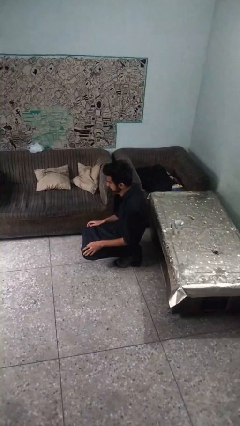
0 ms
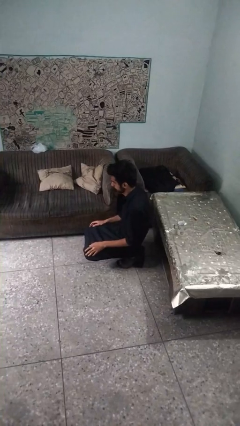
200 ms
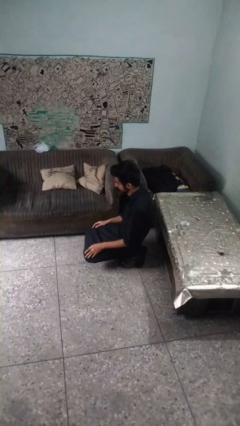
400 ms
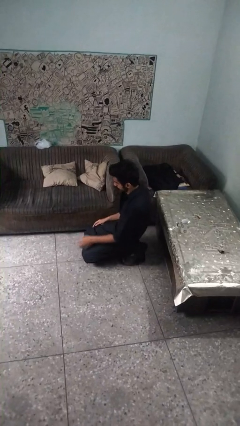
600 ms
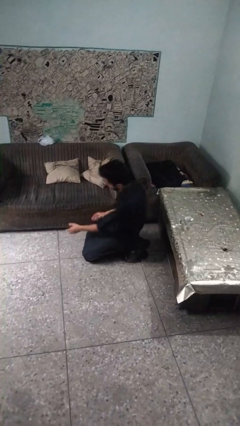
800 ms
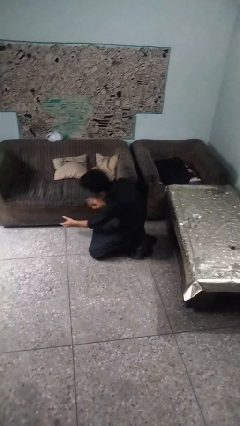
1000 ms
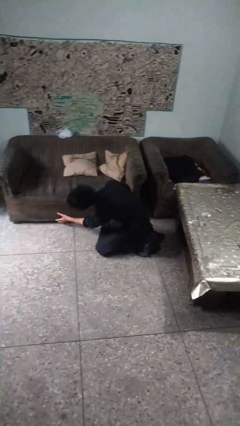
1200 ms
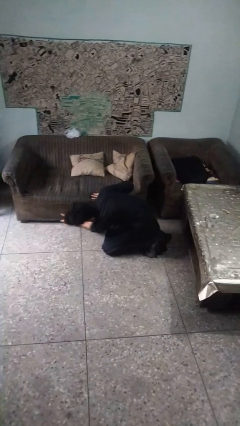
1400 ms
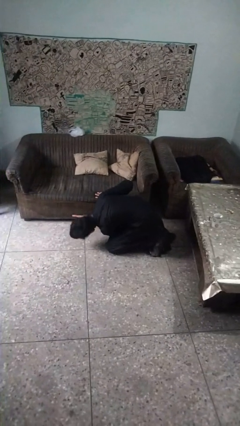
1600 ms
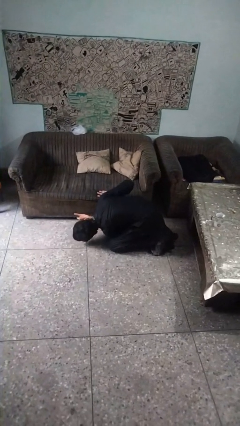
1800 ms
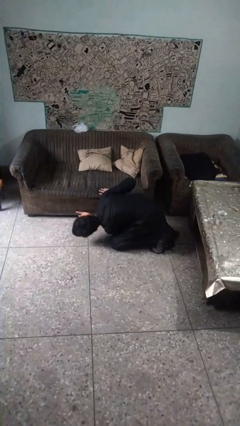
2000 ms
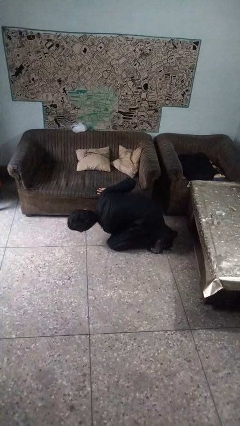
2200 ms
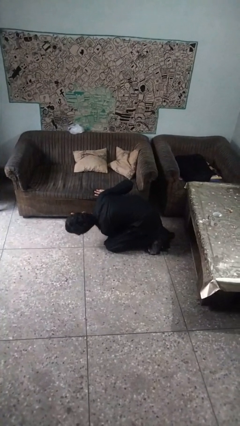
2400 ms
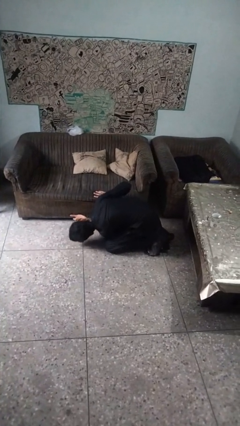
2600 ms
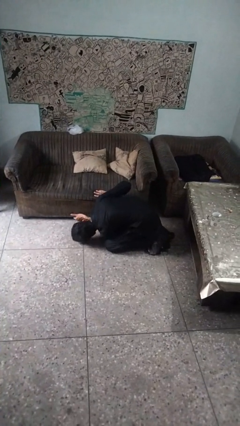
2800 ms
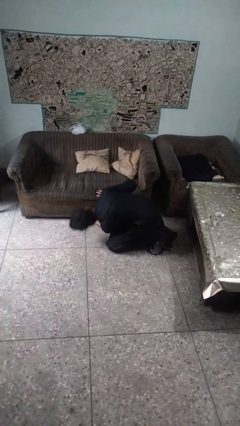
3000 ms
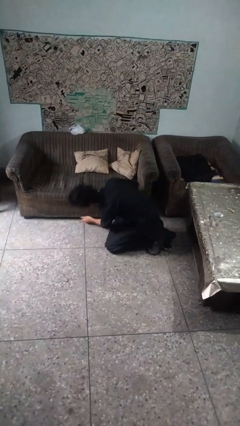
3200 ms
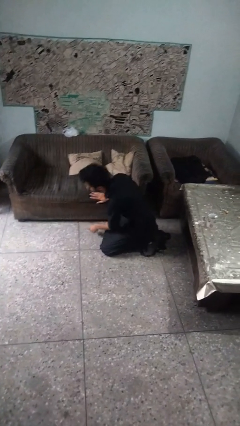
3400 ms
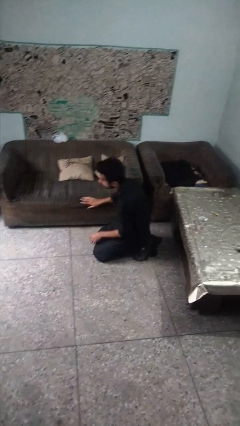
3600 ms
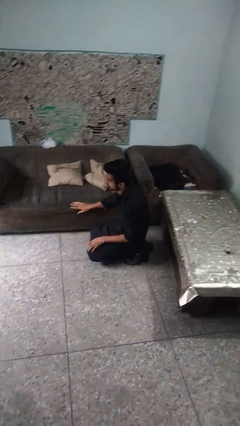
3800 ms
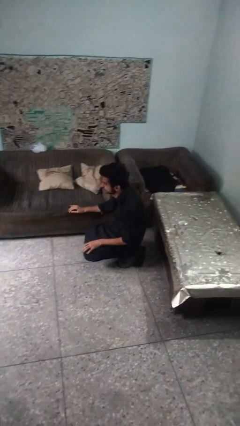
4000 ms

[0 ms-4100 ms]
person searches under couch

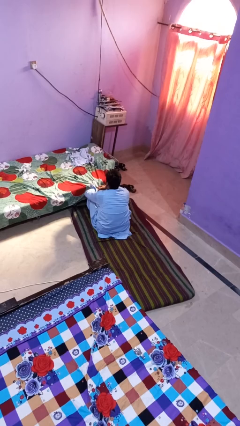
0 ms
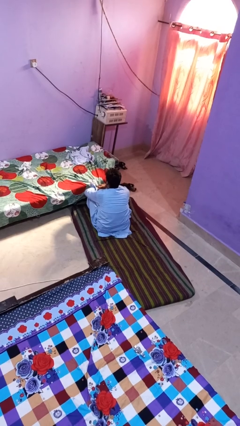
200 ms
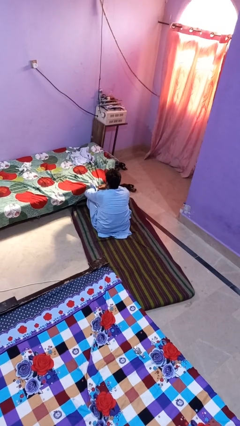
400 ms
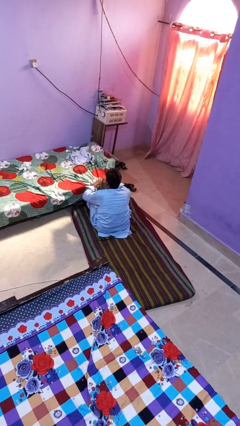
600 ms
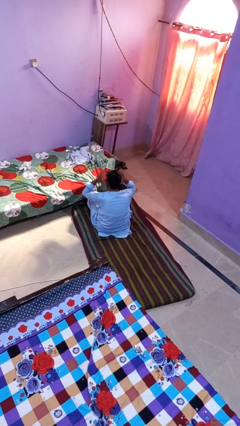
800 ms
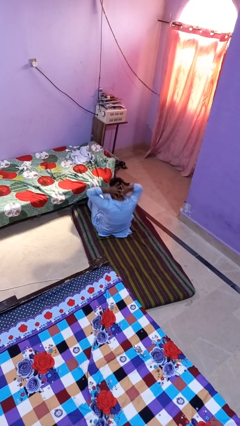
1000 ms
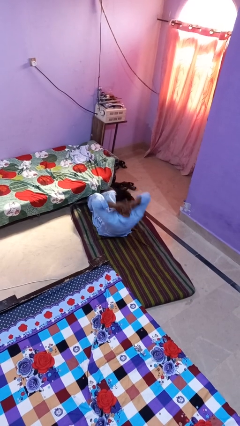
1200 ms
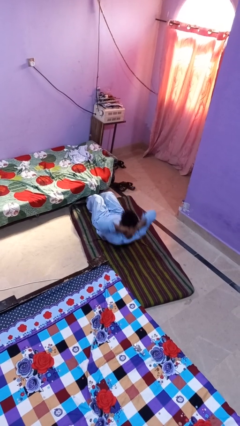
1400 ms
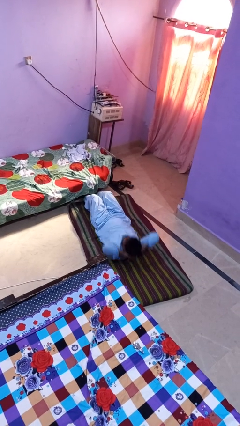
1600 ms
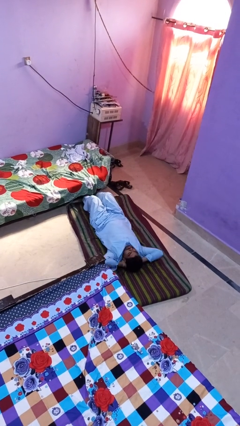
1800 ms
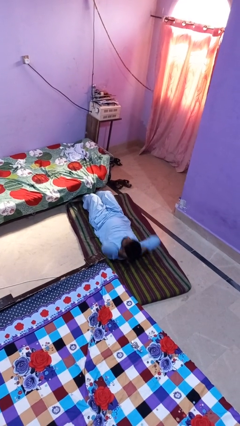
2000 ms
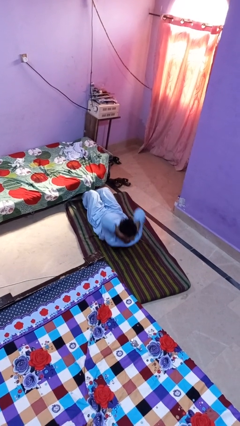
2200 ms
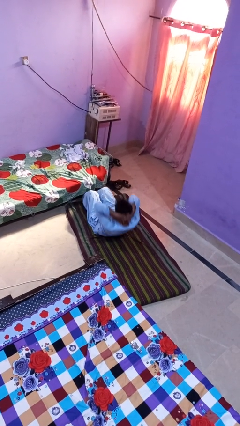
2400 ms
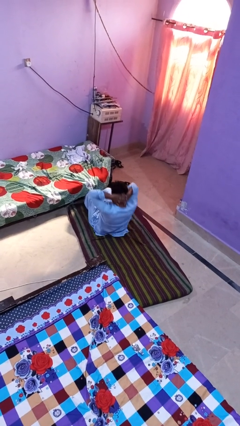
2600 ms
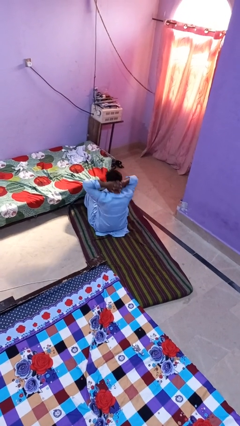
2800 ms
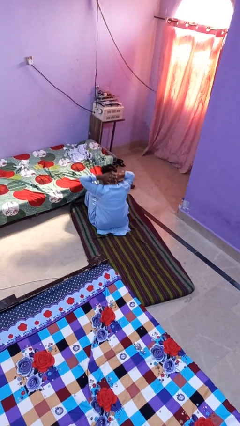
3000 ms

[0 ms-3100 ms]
person exercises with situp

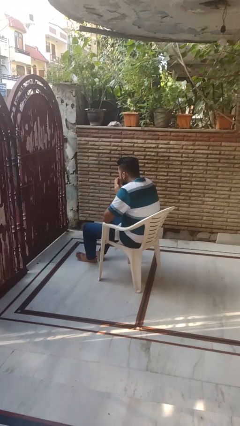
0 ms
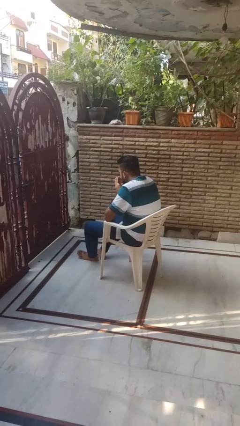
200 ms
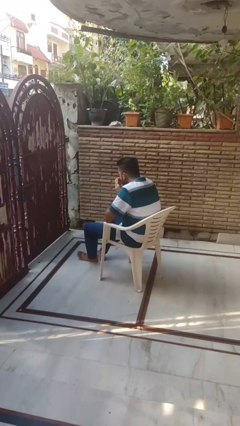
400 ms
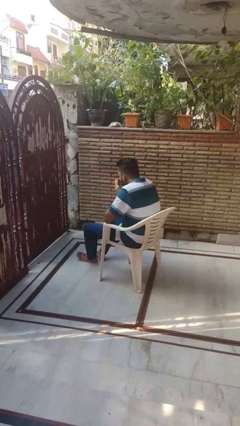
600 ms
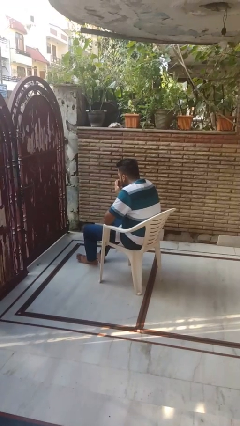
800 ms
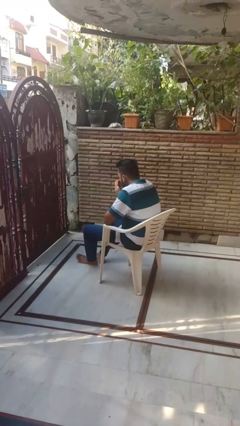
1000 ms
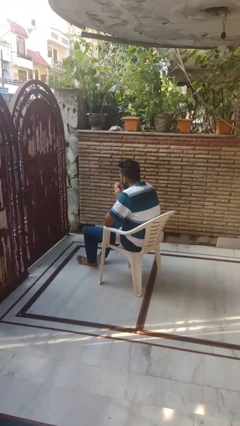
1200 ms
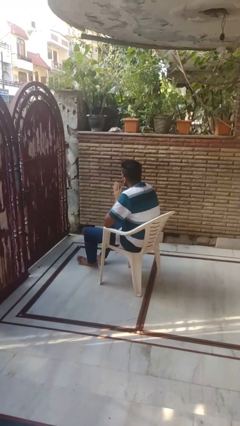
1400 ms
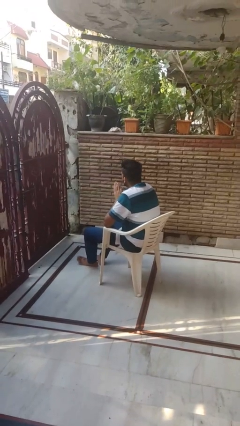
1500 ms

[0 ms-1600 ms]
person blows into hands

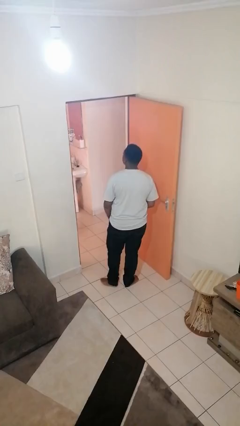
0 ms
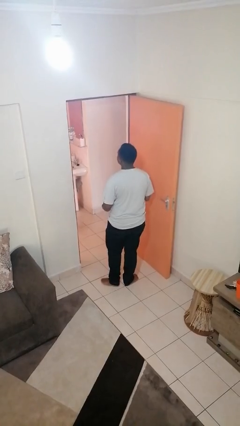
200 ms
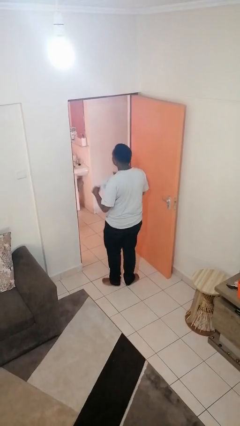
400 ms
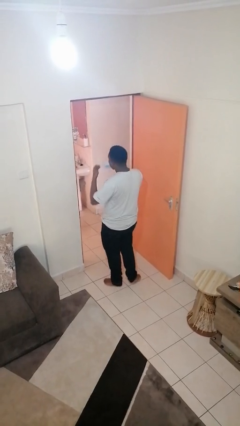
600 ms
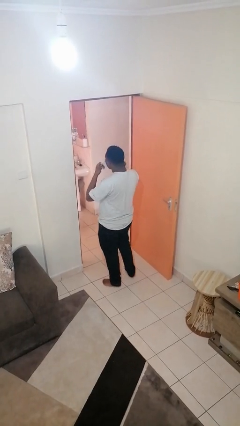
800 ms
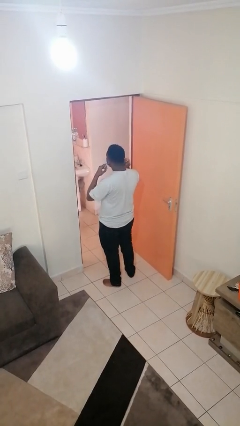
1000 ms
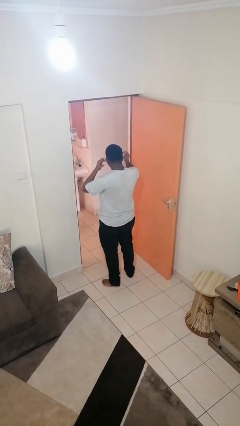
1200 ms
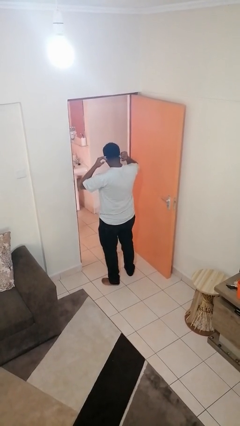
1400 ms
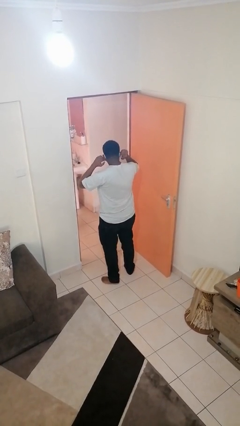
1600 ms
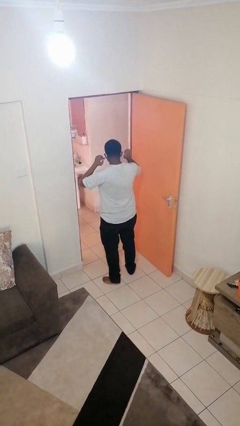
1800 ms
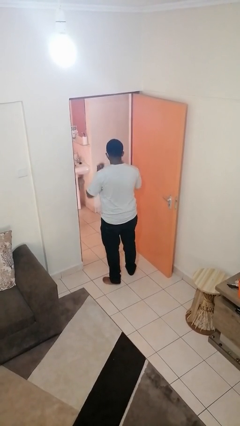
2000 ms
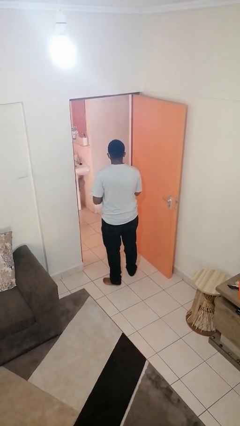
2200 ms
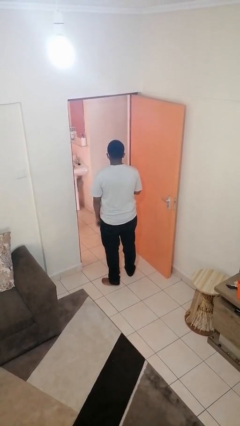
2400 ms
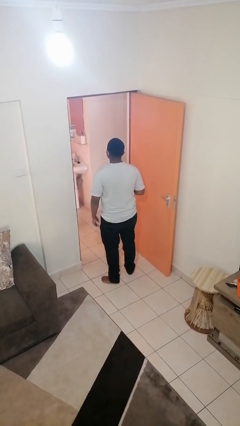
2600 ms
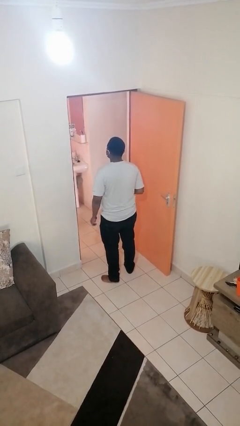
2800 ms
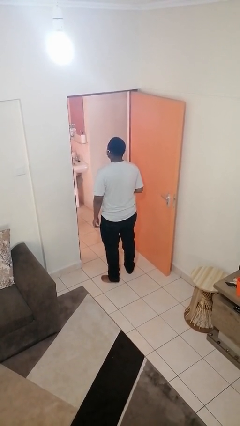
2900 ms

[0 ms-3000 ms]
person puts on facemask

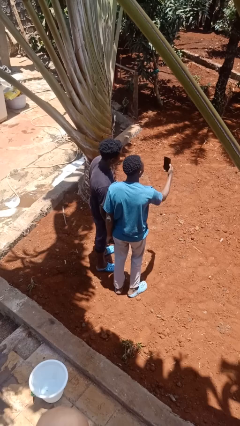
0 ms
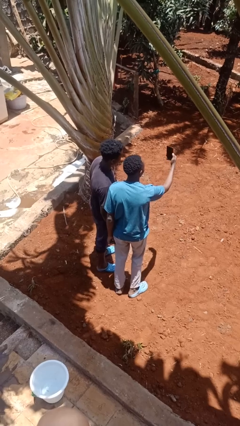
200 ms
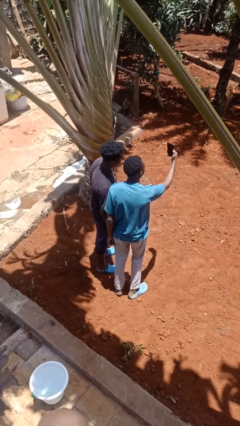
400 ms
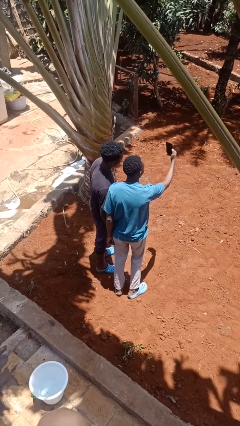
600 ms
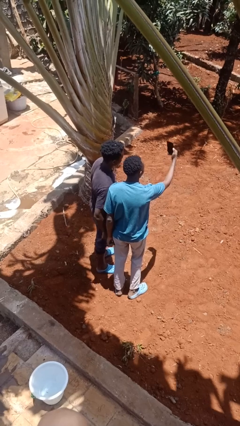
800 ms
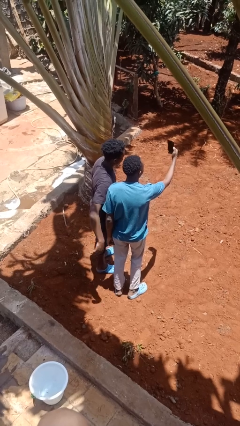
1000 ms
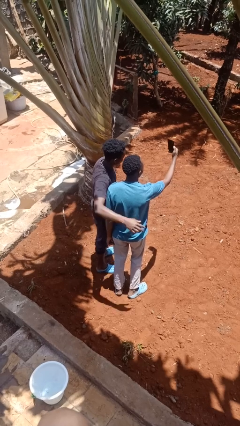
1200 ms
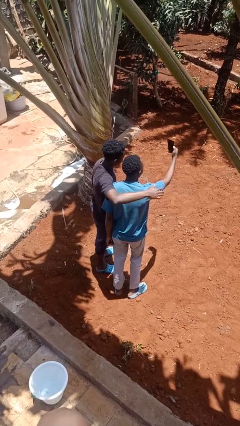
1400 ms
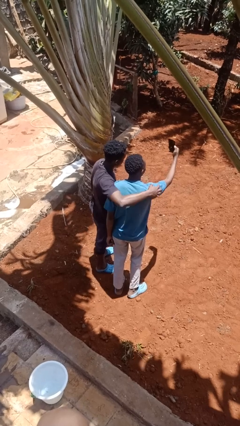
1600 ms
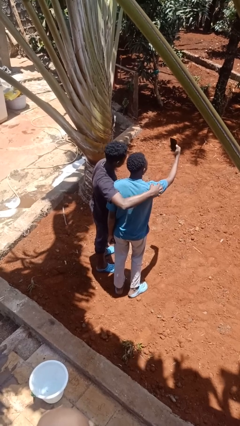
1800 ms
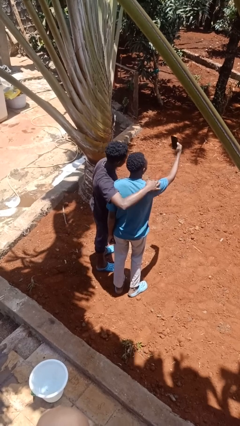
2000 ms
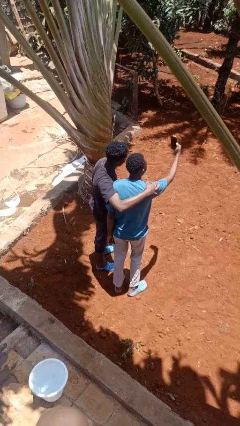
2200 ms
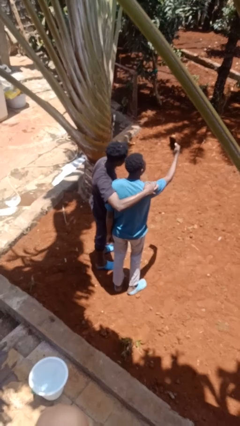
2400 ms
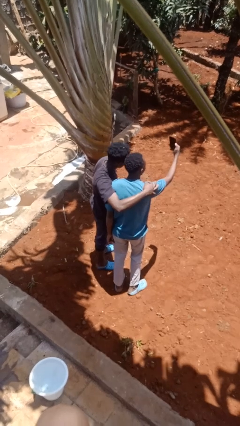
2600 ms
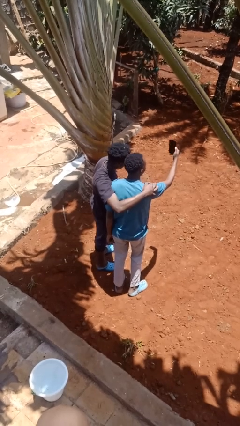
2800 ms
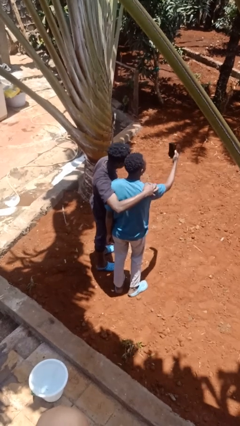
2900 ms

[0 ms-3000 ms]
person takes selfie with person

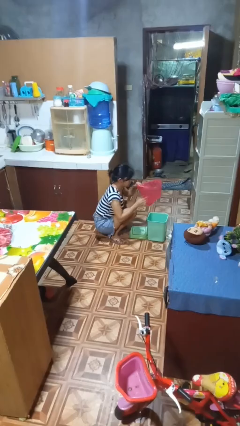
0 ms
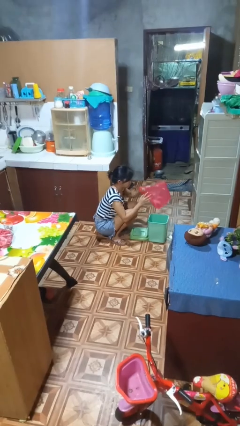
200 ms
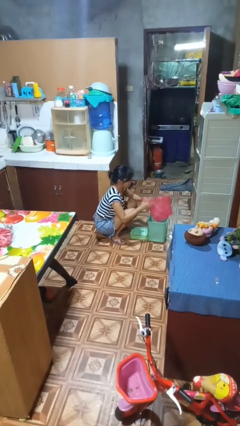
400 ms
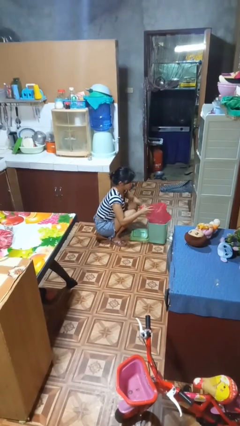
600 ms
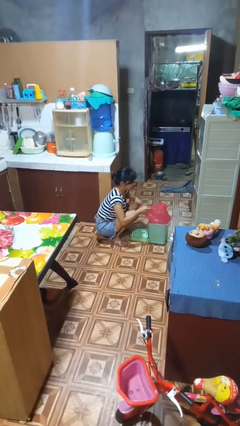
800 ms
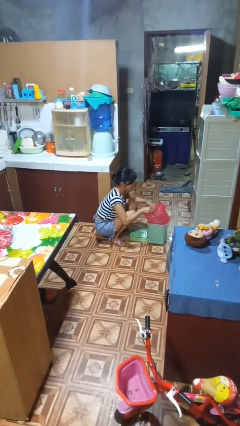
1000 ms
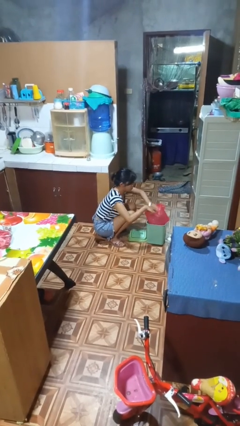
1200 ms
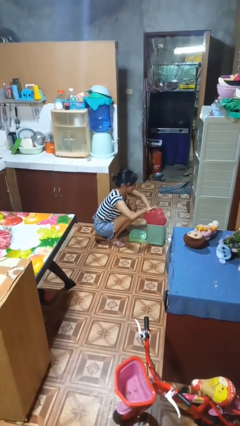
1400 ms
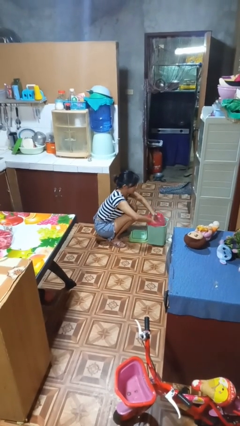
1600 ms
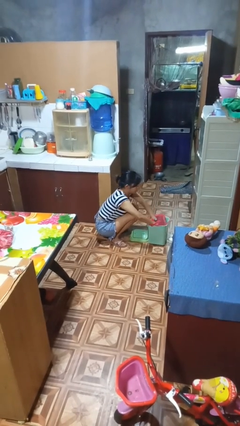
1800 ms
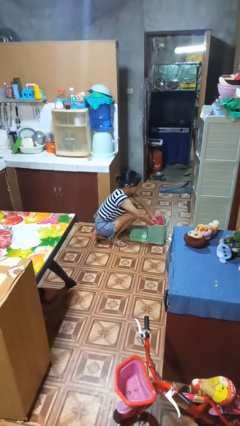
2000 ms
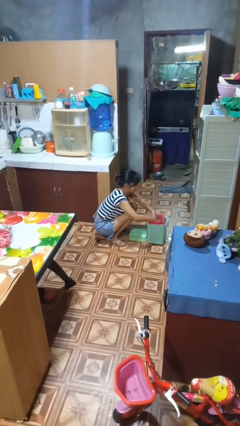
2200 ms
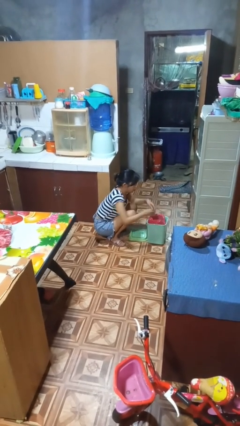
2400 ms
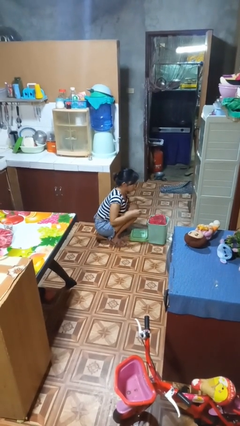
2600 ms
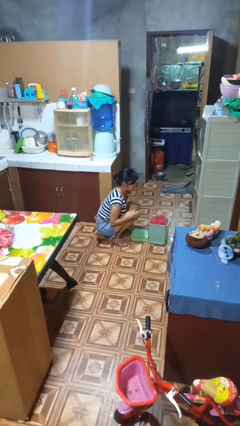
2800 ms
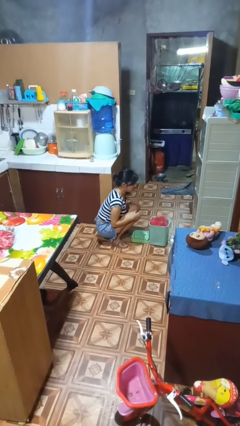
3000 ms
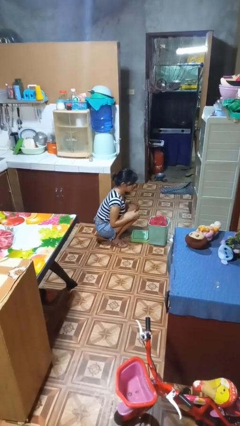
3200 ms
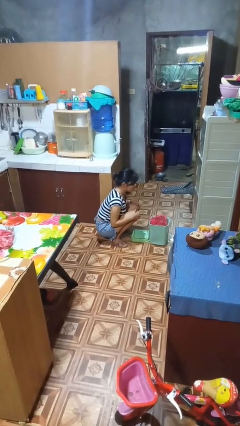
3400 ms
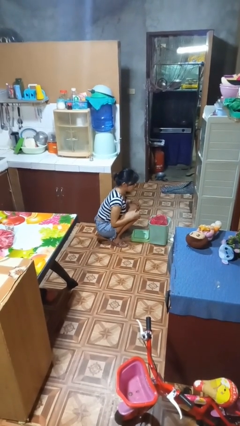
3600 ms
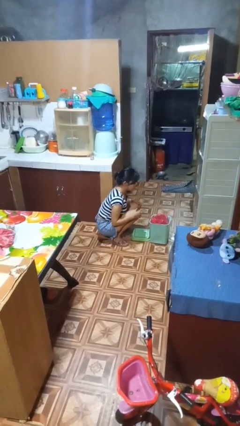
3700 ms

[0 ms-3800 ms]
person inserts trashbag into trashcan
